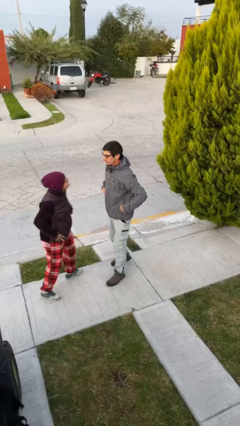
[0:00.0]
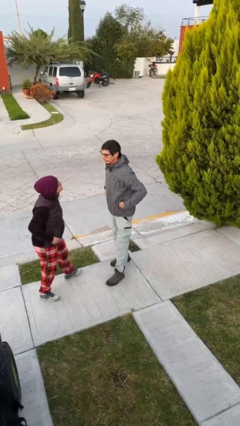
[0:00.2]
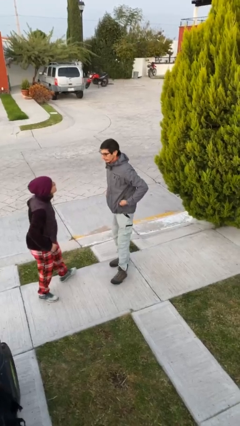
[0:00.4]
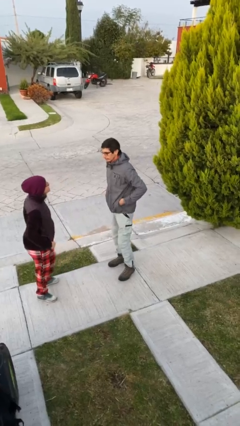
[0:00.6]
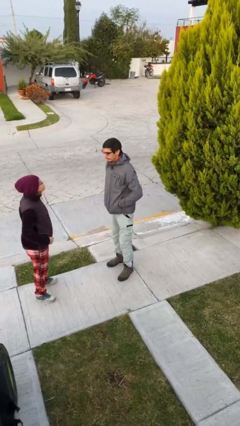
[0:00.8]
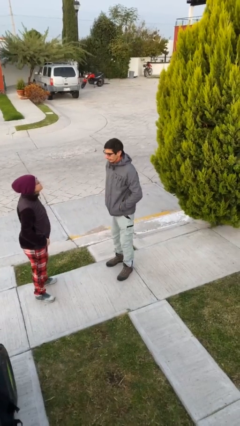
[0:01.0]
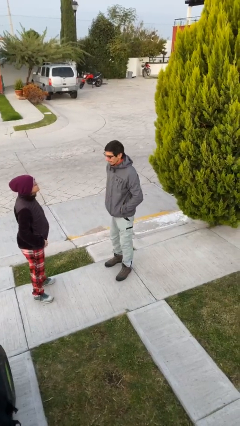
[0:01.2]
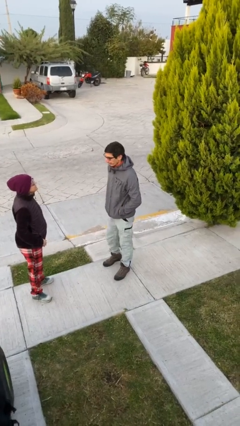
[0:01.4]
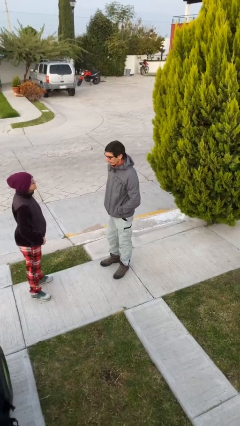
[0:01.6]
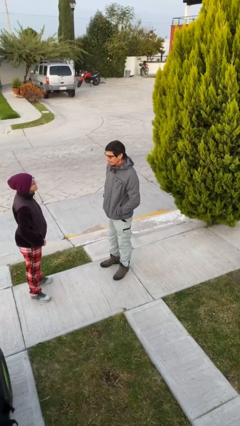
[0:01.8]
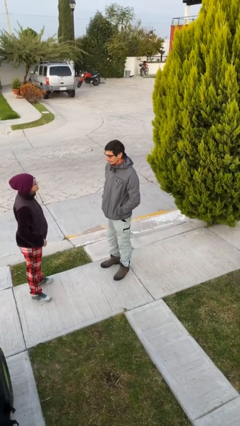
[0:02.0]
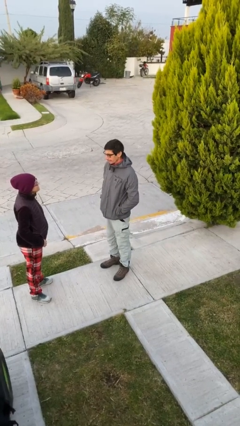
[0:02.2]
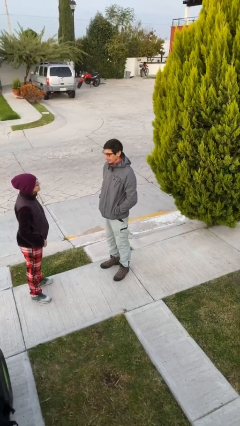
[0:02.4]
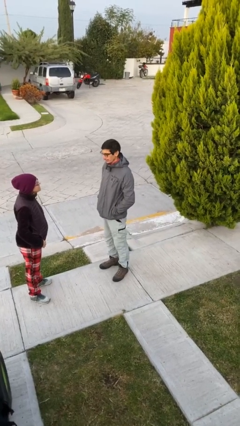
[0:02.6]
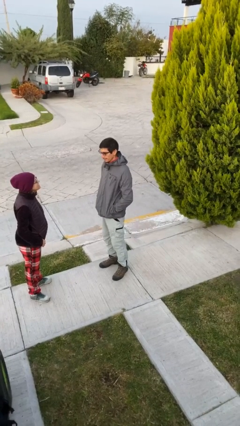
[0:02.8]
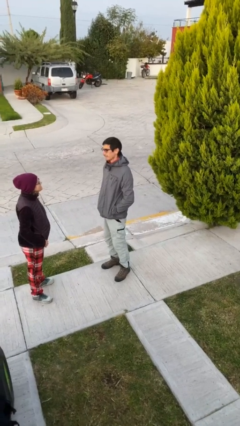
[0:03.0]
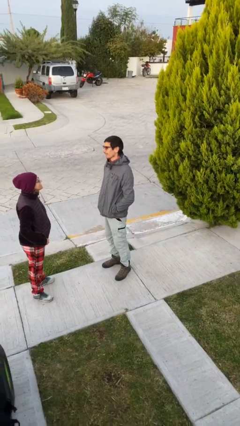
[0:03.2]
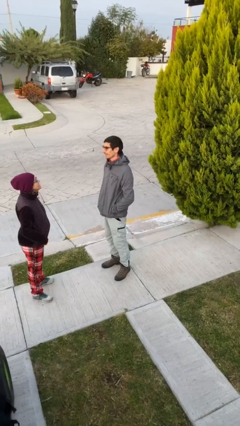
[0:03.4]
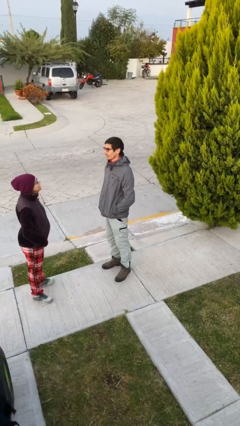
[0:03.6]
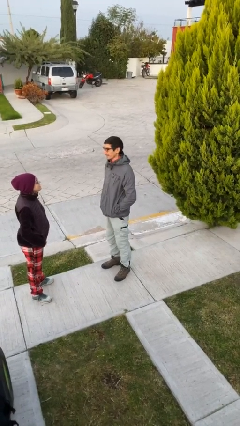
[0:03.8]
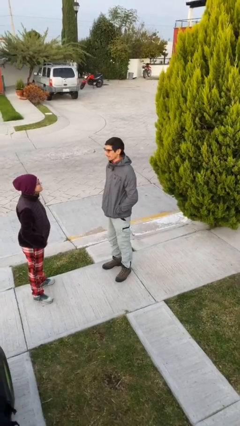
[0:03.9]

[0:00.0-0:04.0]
person talks to person

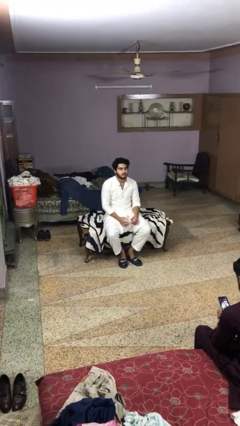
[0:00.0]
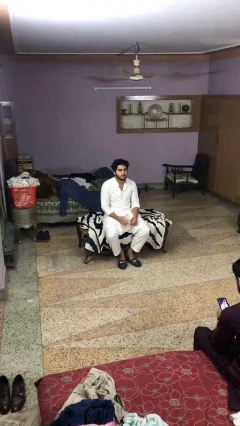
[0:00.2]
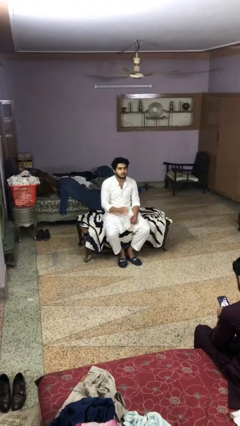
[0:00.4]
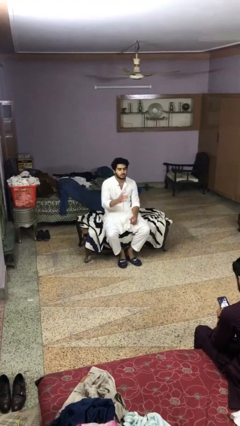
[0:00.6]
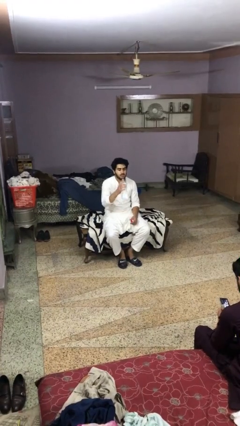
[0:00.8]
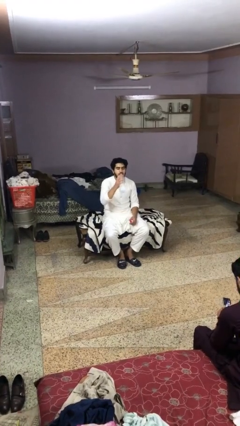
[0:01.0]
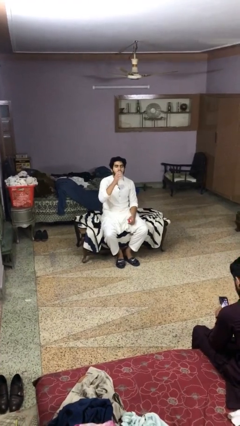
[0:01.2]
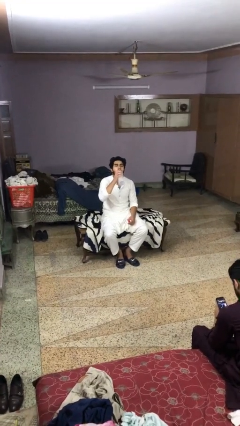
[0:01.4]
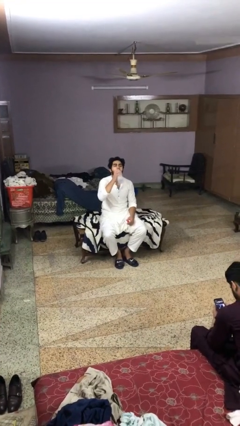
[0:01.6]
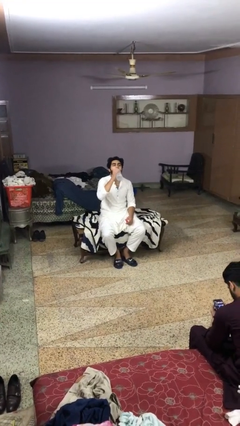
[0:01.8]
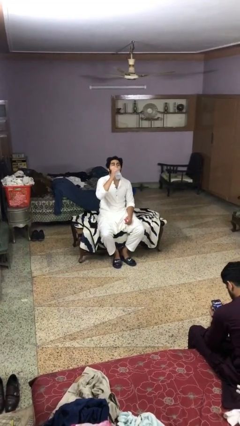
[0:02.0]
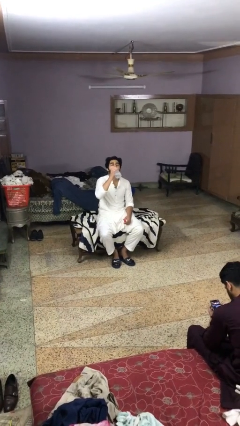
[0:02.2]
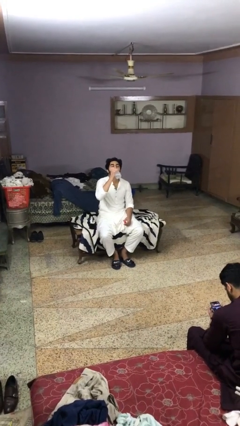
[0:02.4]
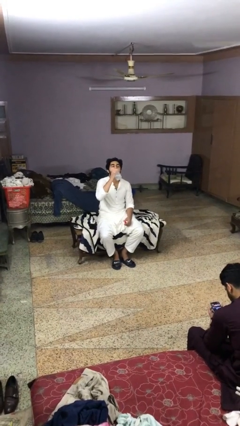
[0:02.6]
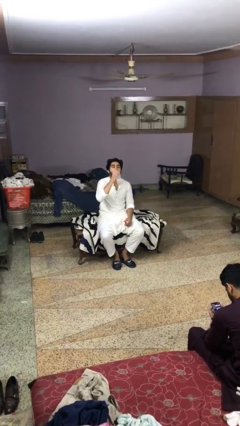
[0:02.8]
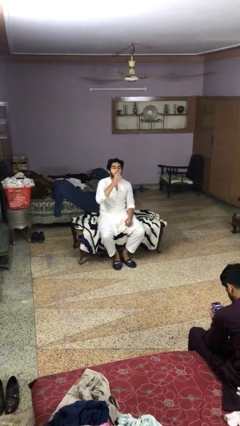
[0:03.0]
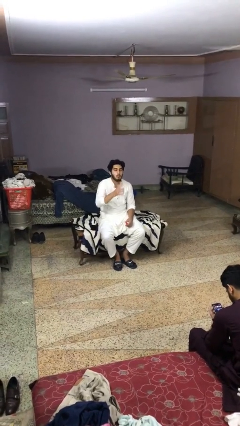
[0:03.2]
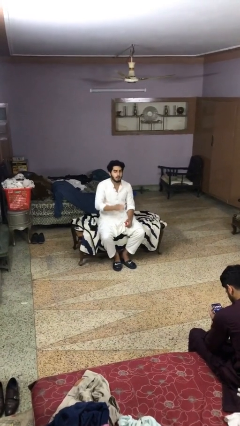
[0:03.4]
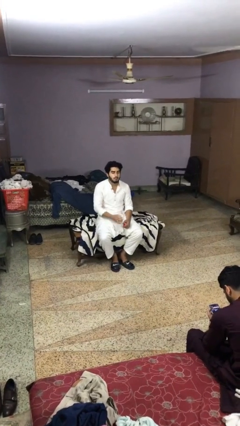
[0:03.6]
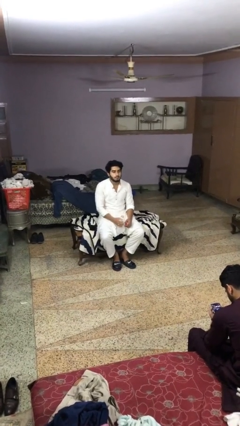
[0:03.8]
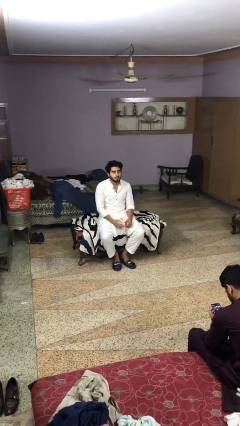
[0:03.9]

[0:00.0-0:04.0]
person drinks from bottle

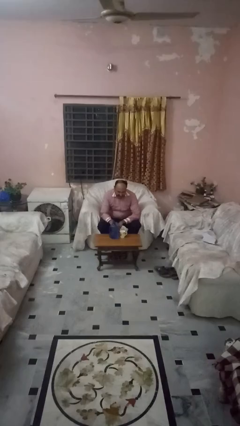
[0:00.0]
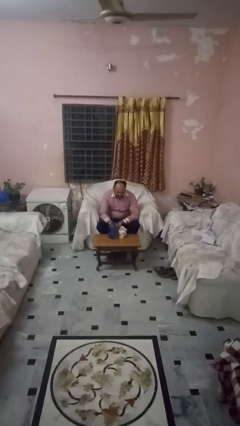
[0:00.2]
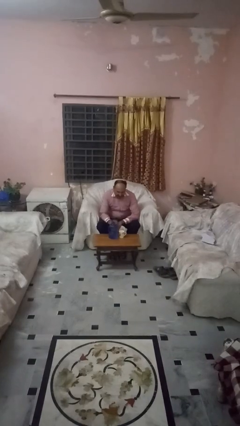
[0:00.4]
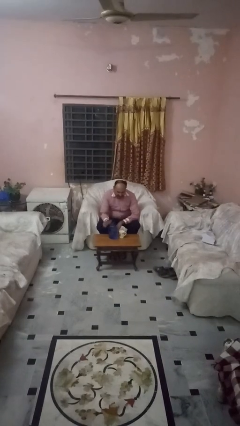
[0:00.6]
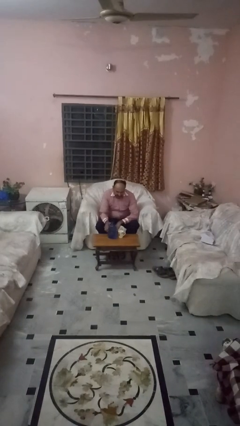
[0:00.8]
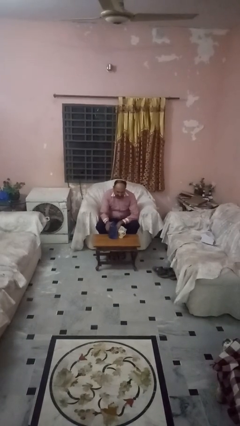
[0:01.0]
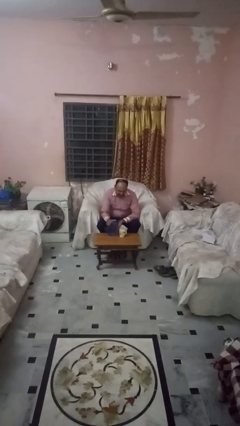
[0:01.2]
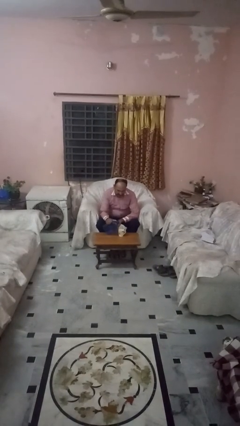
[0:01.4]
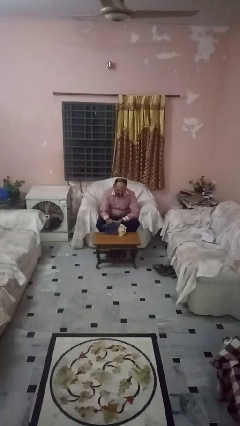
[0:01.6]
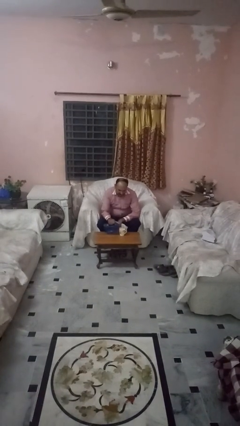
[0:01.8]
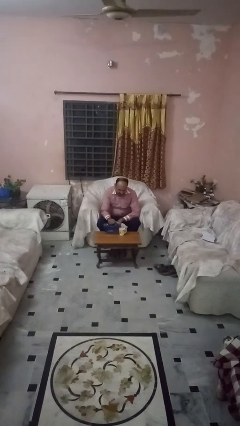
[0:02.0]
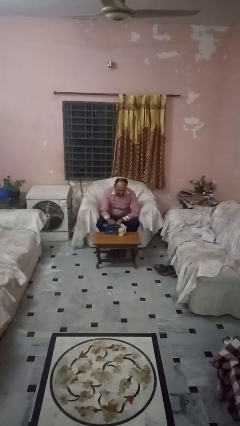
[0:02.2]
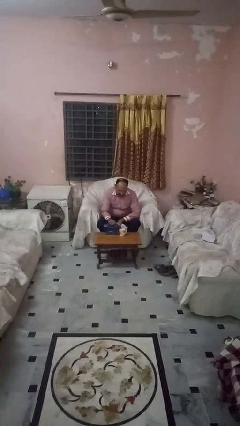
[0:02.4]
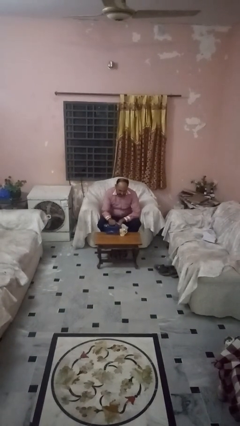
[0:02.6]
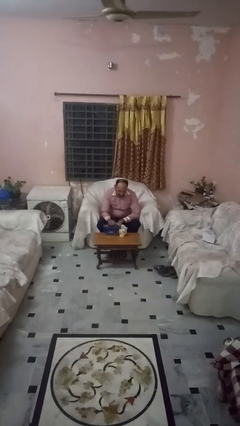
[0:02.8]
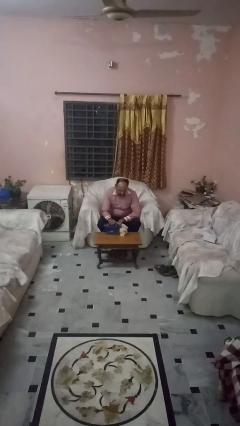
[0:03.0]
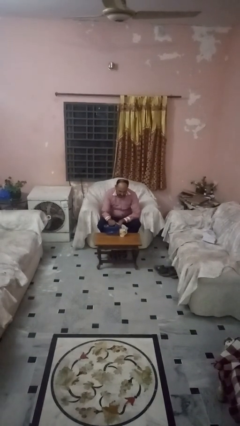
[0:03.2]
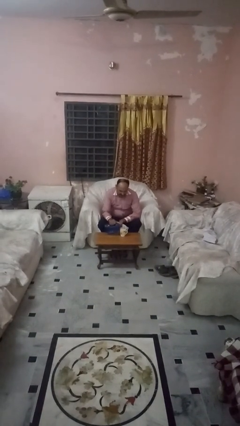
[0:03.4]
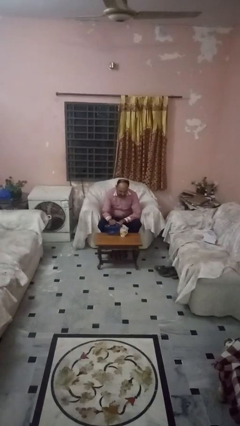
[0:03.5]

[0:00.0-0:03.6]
person pours liquid into cup

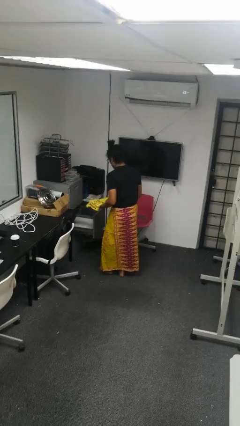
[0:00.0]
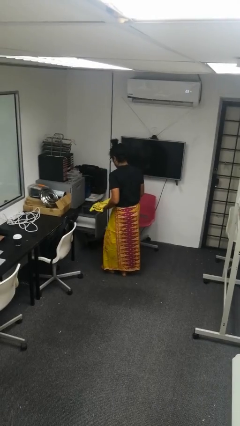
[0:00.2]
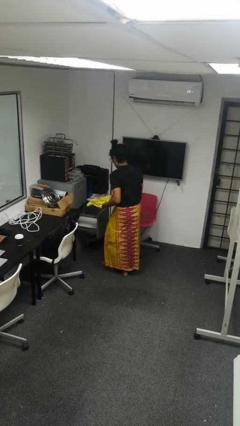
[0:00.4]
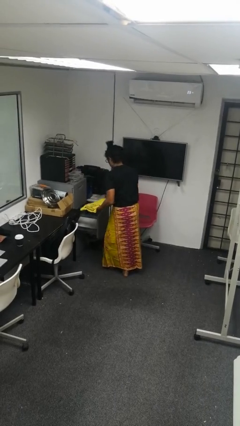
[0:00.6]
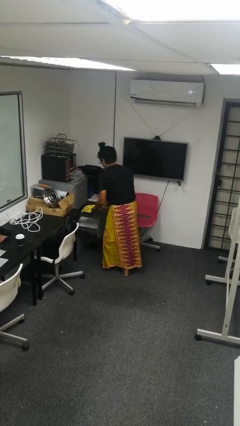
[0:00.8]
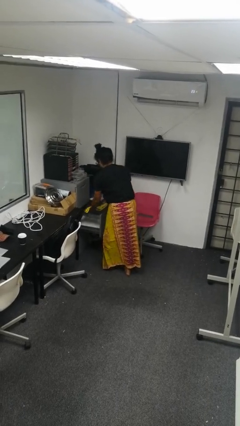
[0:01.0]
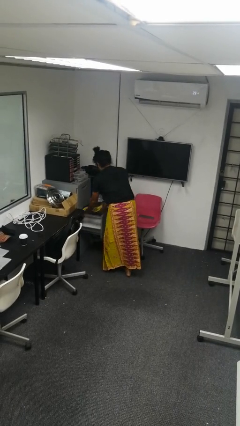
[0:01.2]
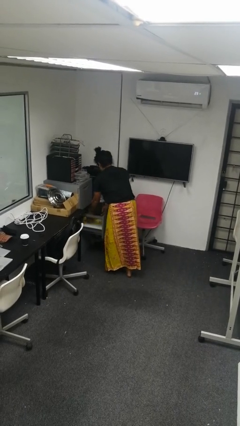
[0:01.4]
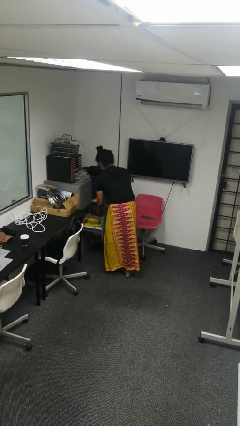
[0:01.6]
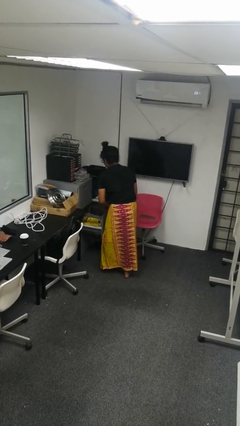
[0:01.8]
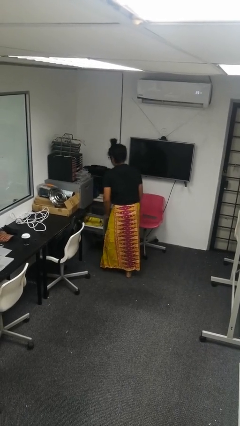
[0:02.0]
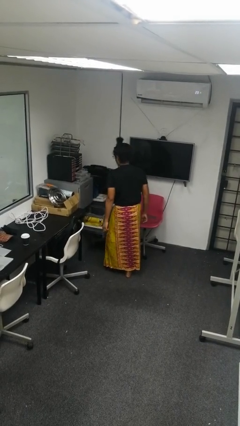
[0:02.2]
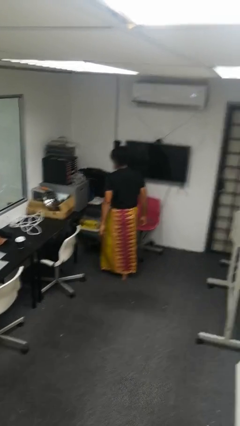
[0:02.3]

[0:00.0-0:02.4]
person puts clothes into dresser

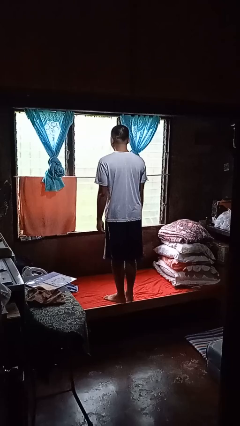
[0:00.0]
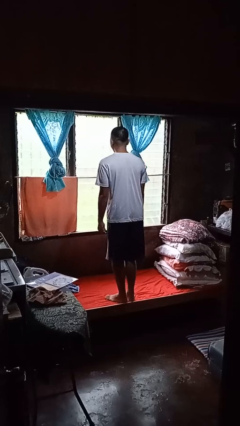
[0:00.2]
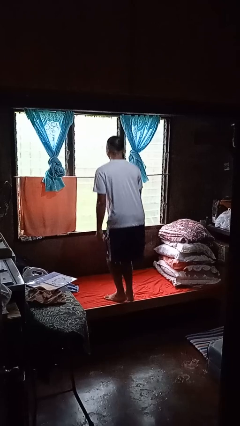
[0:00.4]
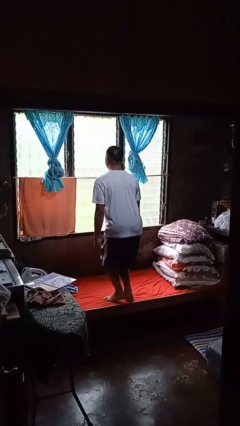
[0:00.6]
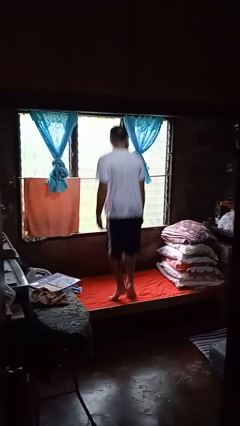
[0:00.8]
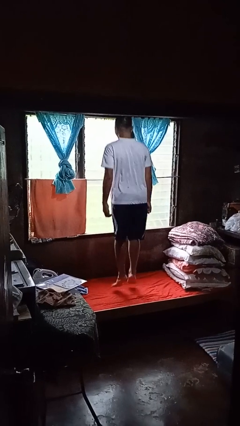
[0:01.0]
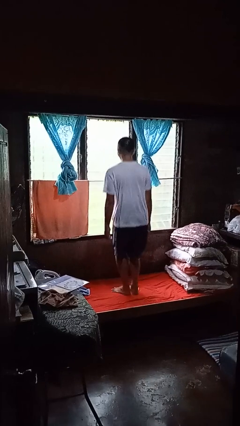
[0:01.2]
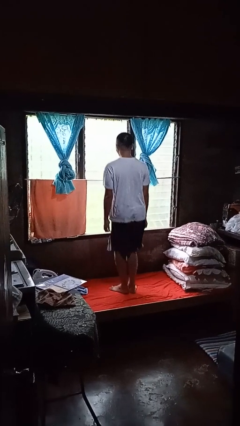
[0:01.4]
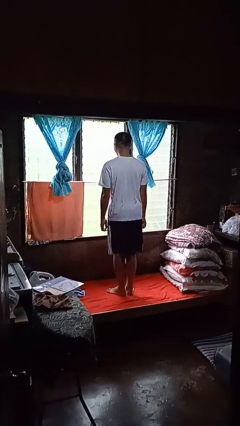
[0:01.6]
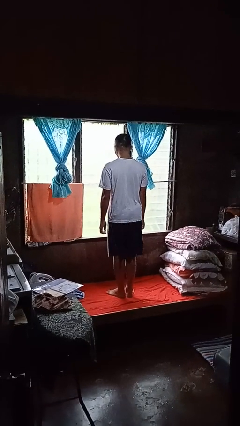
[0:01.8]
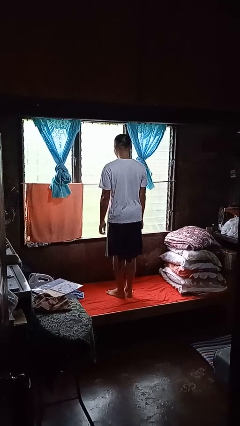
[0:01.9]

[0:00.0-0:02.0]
person jumps on bed

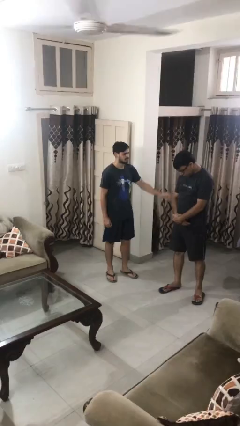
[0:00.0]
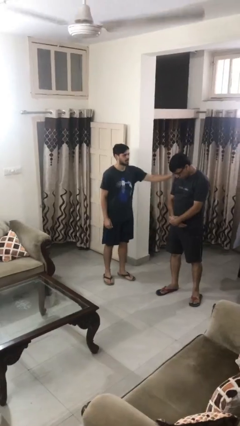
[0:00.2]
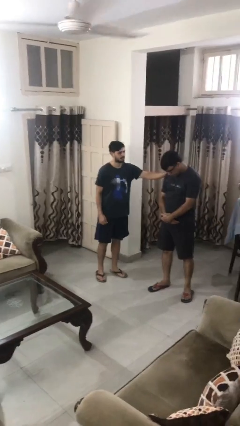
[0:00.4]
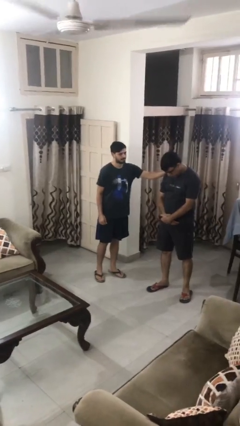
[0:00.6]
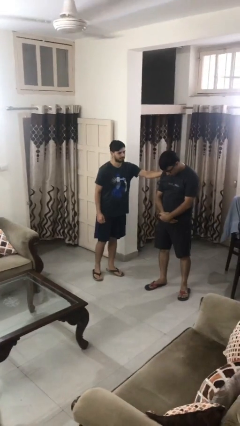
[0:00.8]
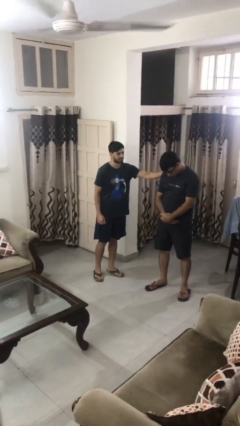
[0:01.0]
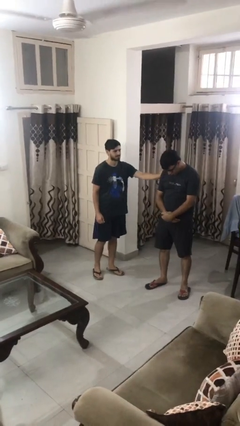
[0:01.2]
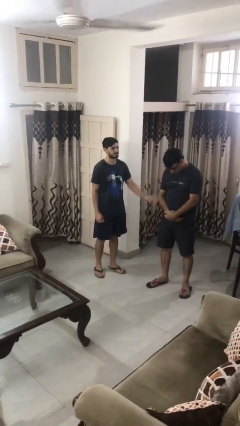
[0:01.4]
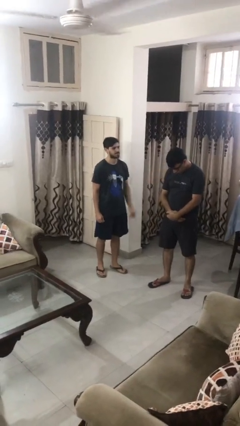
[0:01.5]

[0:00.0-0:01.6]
person pounds shoulders of person
